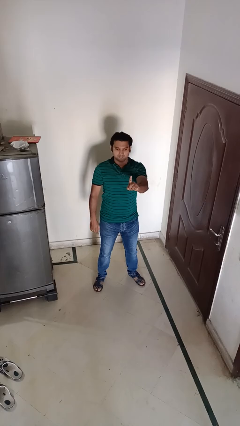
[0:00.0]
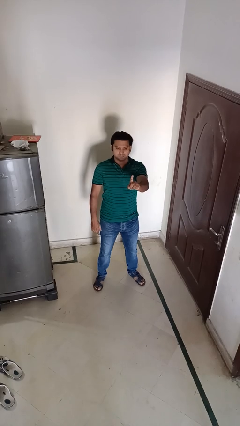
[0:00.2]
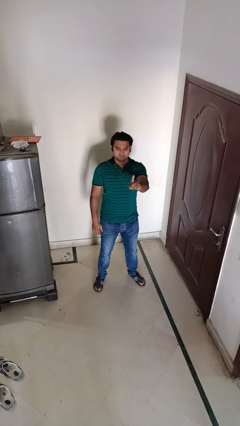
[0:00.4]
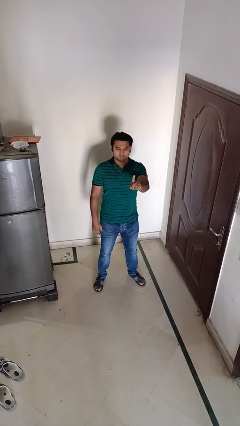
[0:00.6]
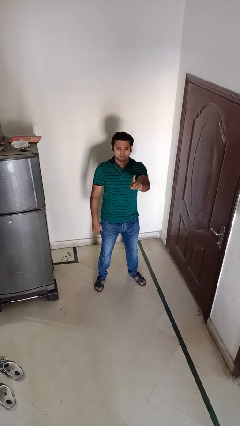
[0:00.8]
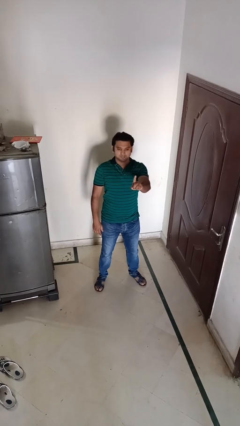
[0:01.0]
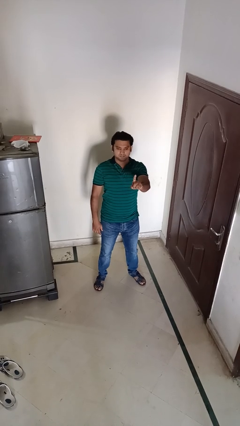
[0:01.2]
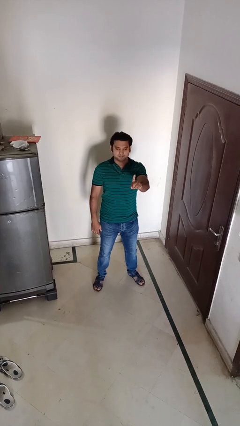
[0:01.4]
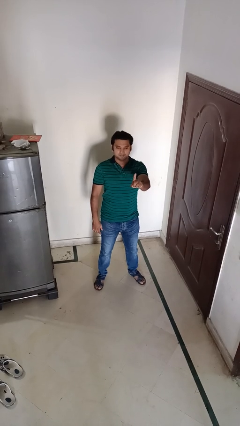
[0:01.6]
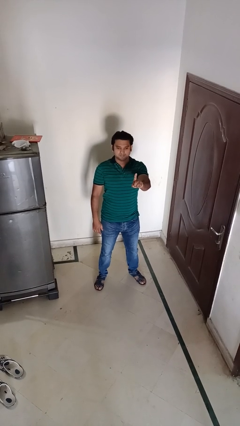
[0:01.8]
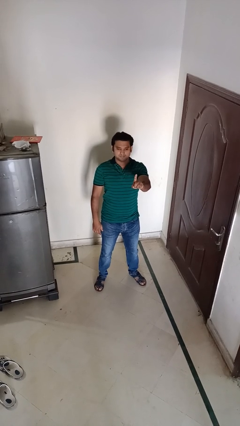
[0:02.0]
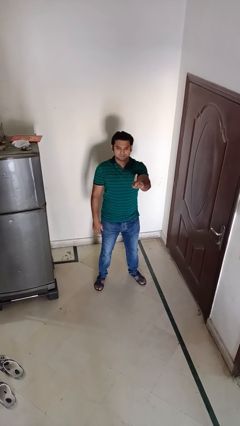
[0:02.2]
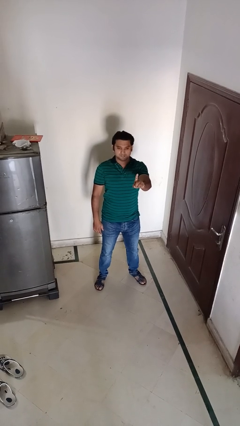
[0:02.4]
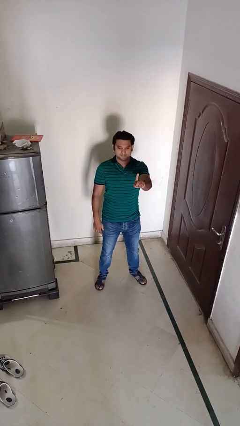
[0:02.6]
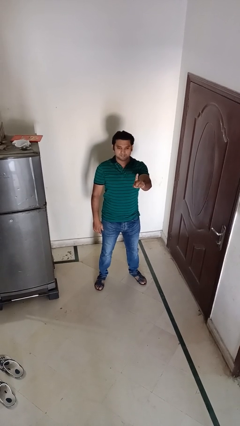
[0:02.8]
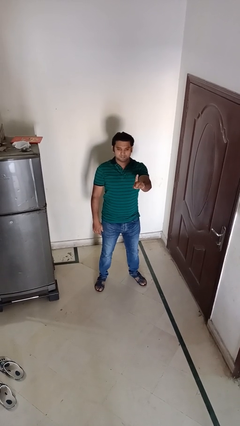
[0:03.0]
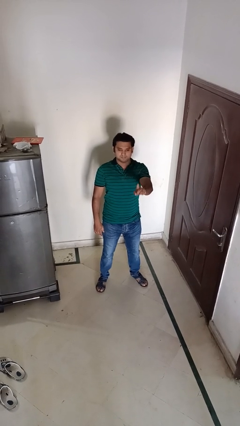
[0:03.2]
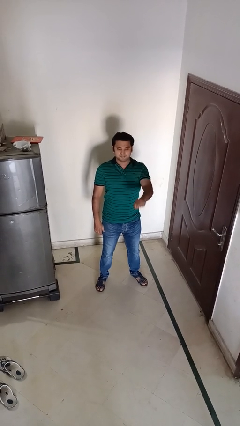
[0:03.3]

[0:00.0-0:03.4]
person gestures number one

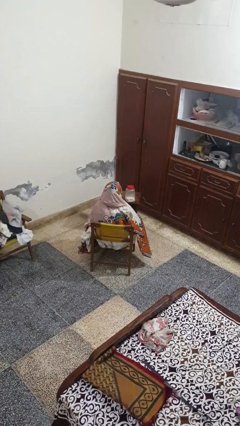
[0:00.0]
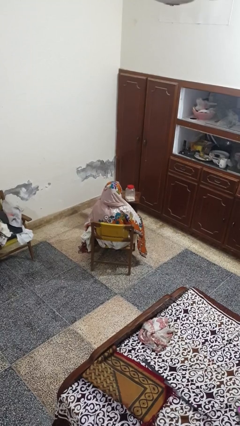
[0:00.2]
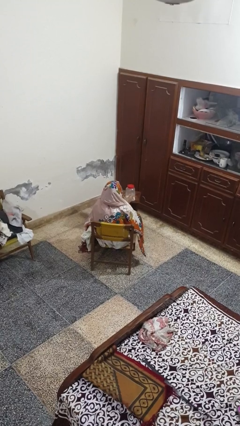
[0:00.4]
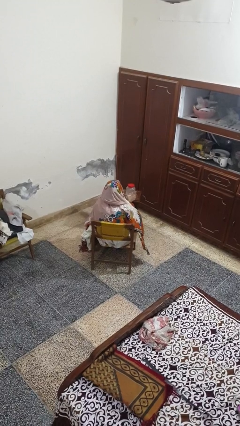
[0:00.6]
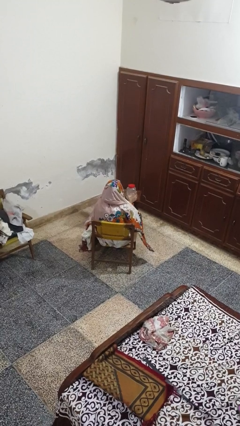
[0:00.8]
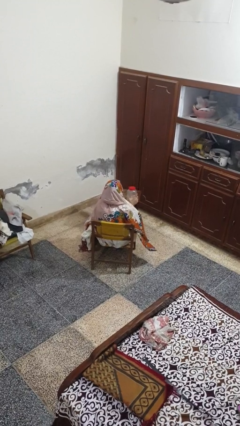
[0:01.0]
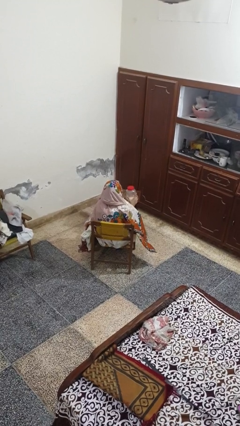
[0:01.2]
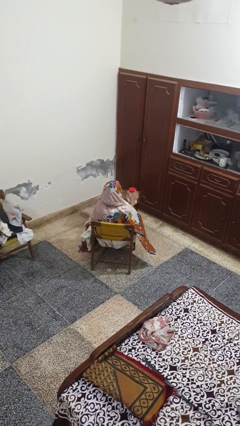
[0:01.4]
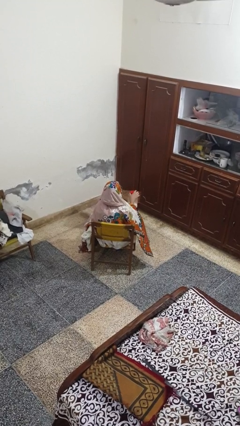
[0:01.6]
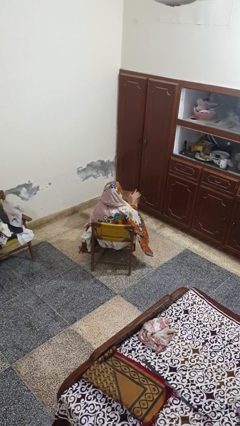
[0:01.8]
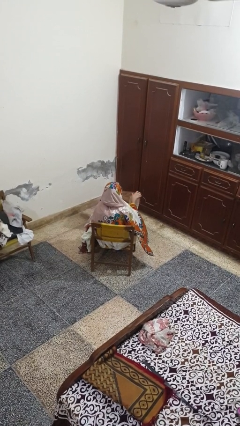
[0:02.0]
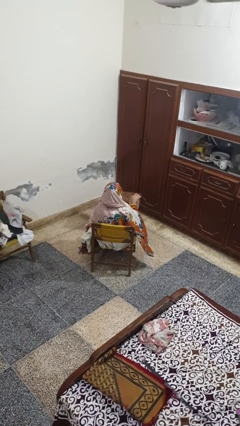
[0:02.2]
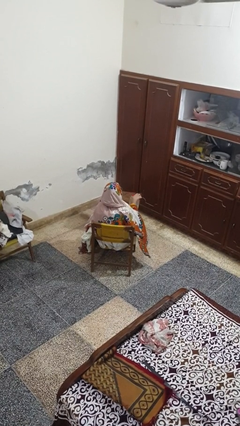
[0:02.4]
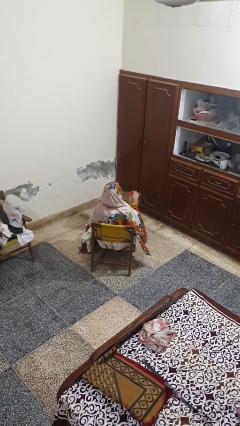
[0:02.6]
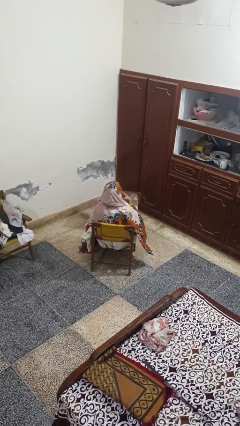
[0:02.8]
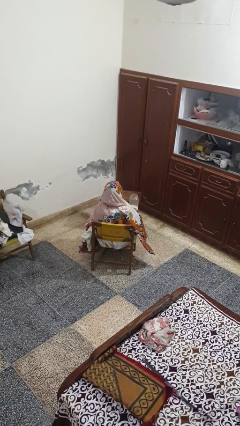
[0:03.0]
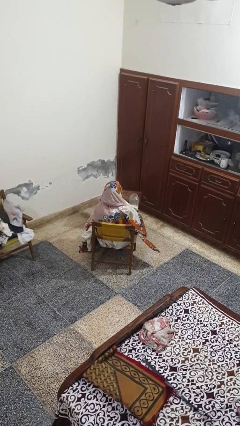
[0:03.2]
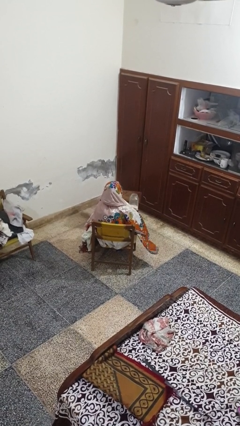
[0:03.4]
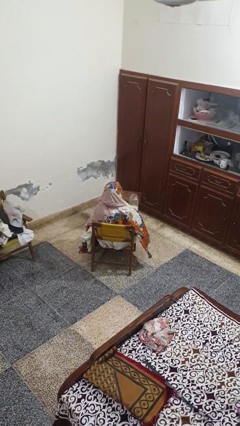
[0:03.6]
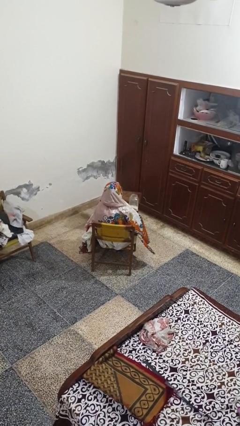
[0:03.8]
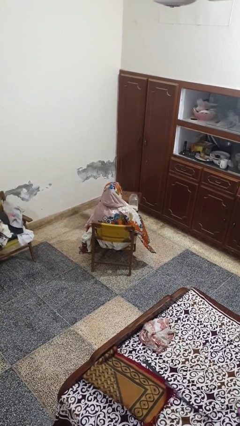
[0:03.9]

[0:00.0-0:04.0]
person opens jar

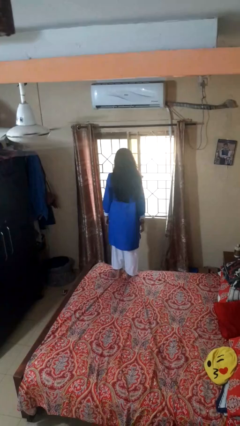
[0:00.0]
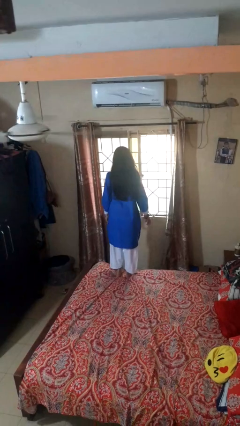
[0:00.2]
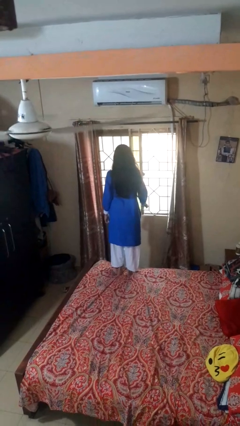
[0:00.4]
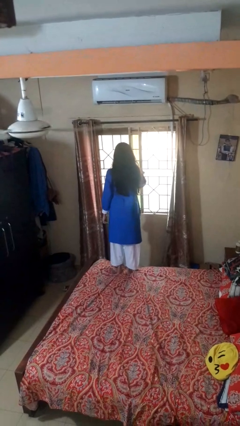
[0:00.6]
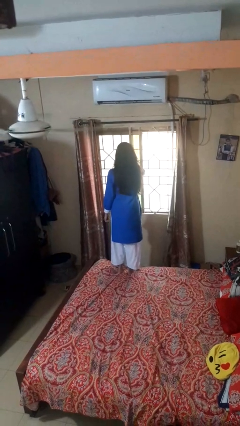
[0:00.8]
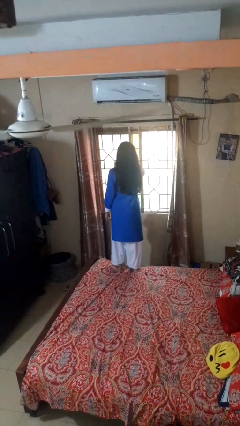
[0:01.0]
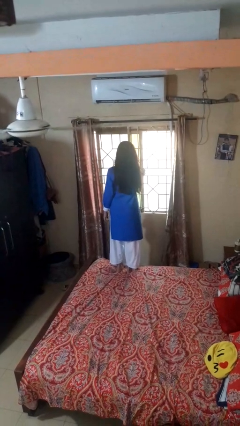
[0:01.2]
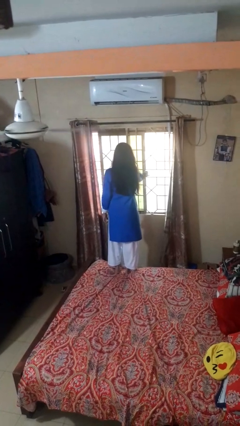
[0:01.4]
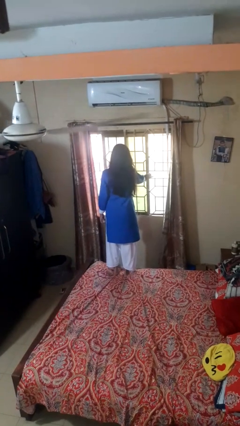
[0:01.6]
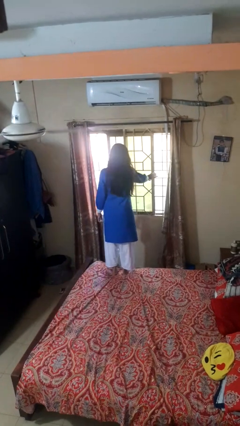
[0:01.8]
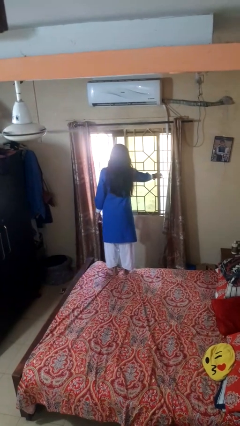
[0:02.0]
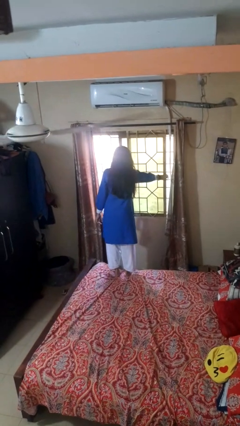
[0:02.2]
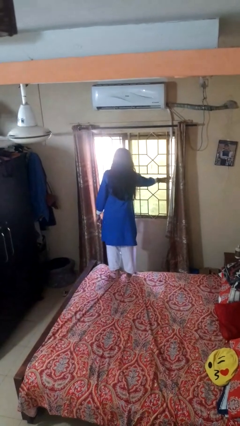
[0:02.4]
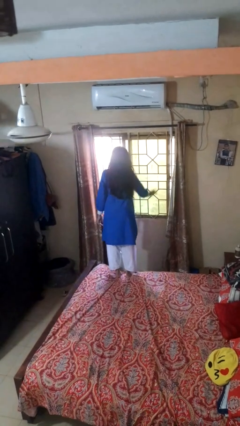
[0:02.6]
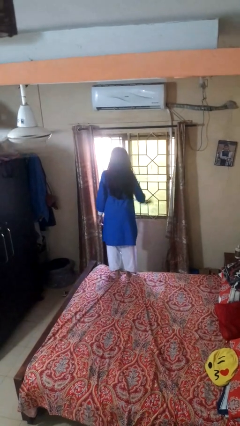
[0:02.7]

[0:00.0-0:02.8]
person opens home window

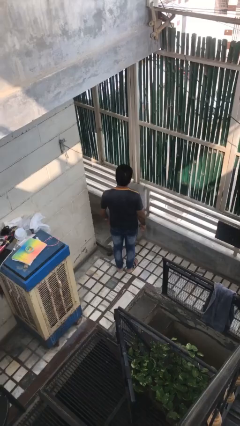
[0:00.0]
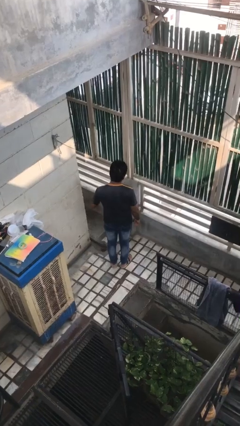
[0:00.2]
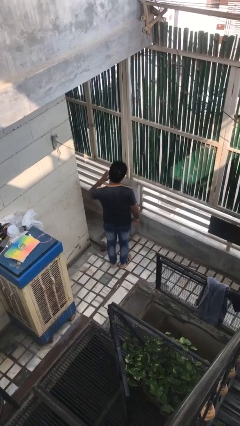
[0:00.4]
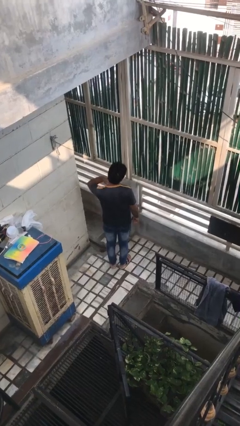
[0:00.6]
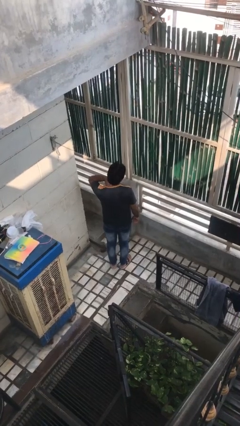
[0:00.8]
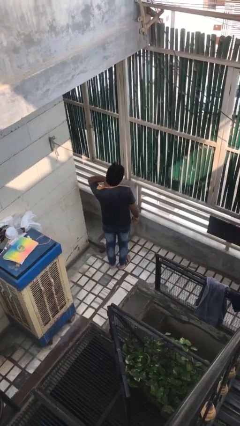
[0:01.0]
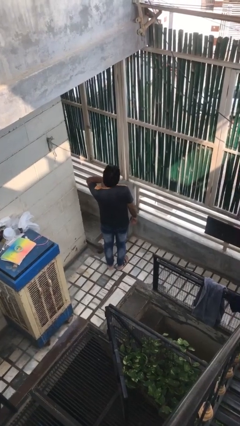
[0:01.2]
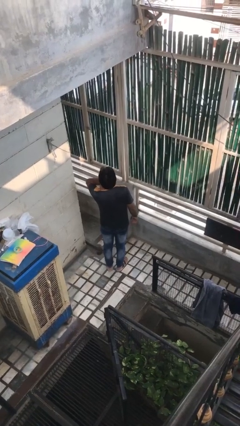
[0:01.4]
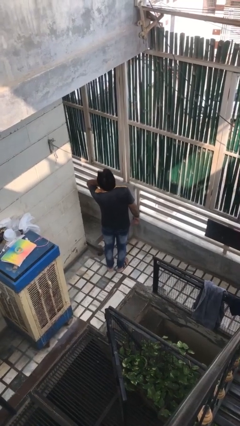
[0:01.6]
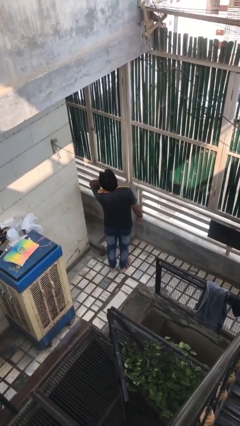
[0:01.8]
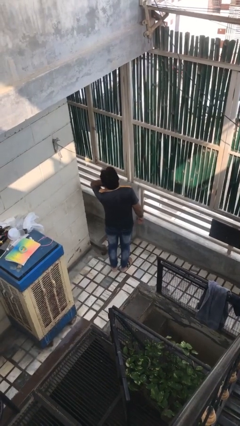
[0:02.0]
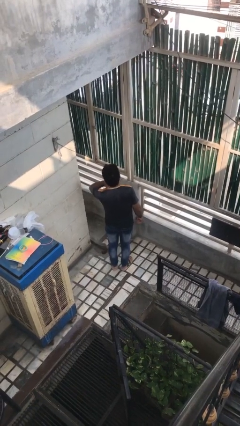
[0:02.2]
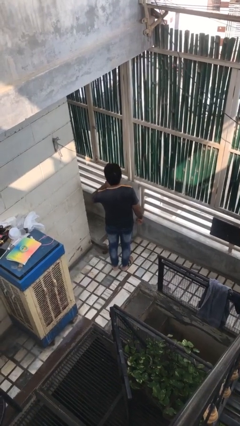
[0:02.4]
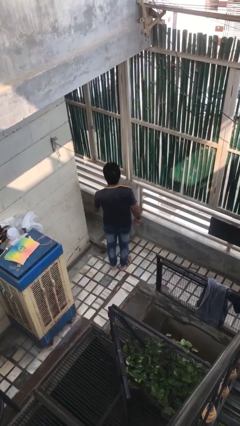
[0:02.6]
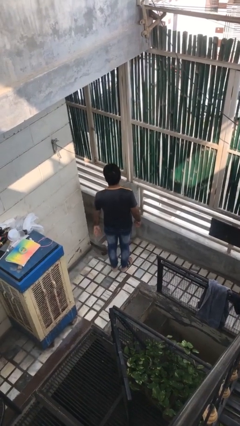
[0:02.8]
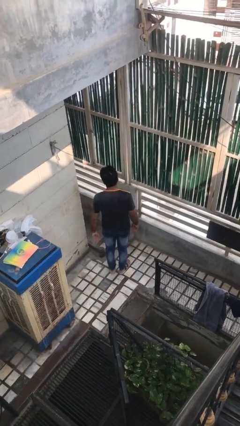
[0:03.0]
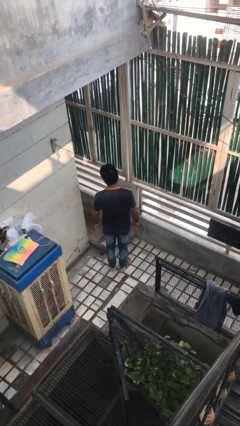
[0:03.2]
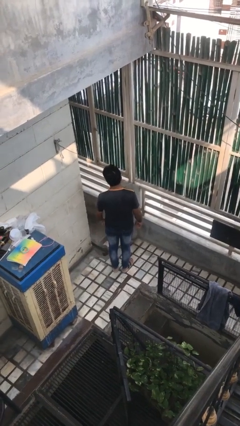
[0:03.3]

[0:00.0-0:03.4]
person rubs neck

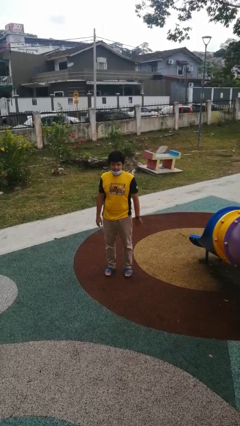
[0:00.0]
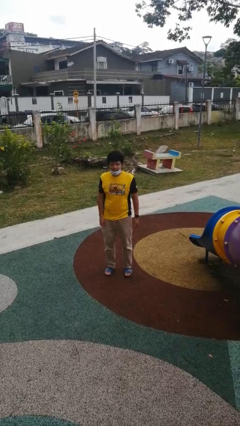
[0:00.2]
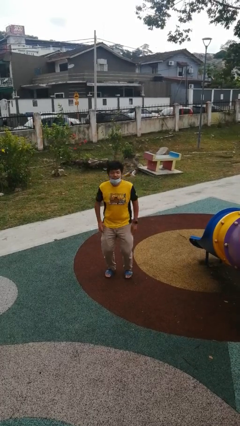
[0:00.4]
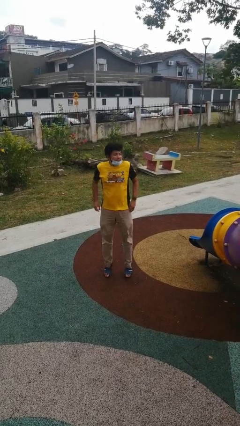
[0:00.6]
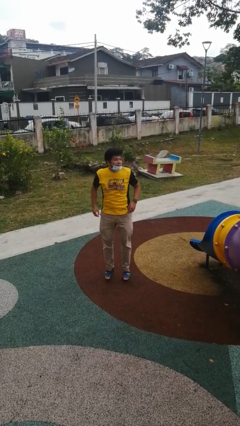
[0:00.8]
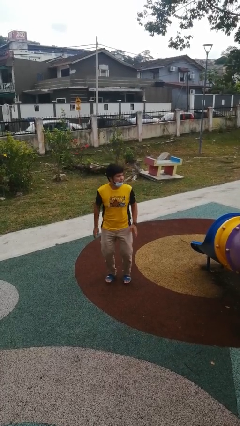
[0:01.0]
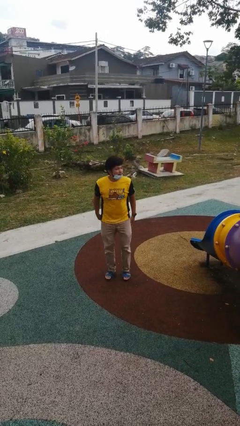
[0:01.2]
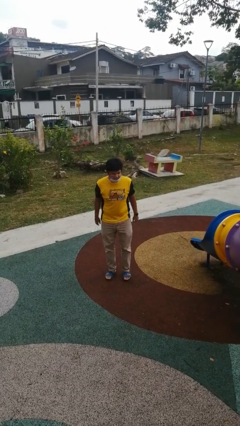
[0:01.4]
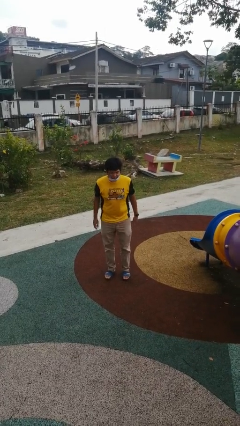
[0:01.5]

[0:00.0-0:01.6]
person jumps

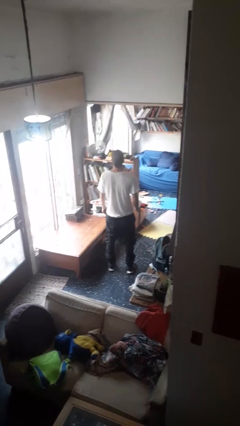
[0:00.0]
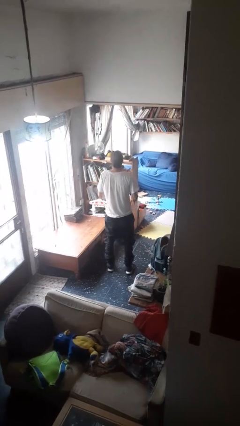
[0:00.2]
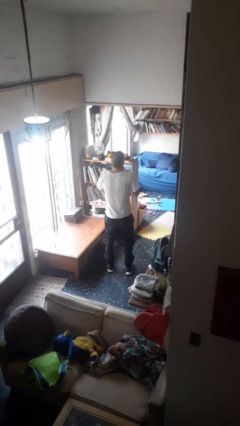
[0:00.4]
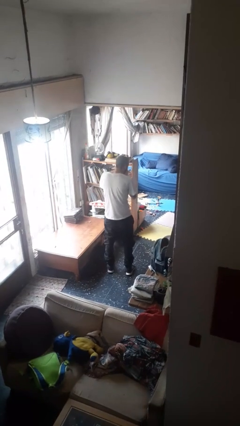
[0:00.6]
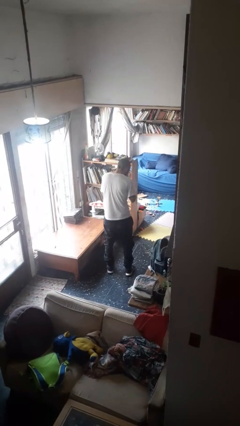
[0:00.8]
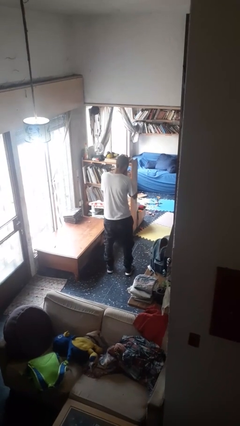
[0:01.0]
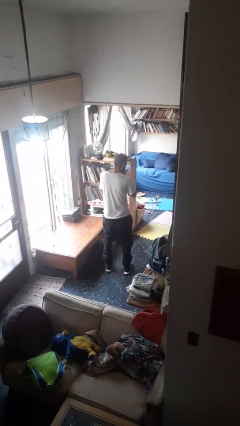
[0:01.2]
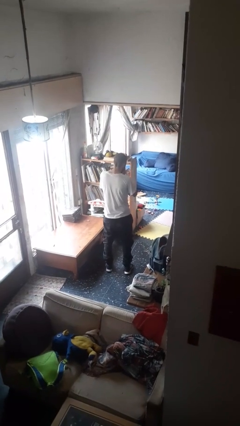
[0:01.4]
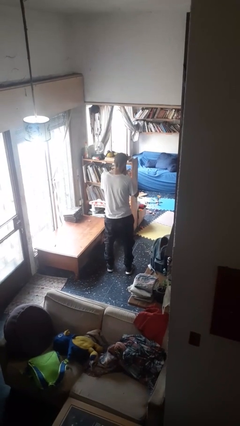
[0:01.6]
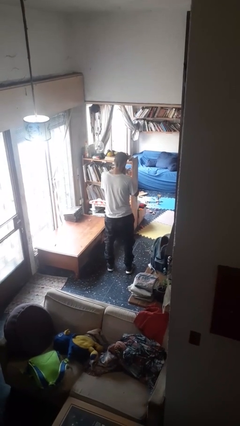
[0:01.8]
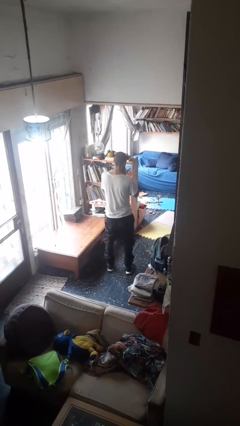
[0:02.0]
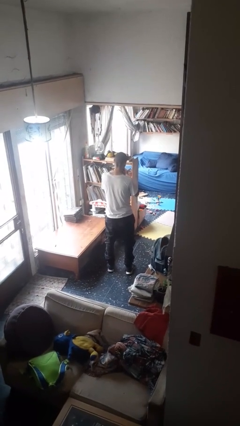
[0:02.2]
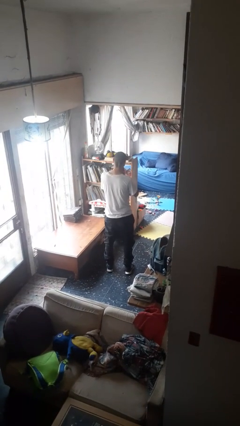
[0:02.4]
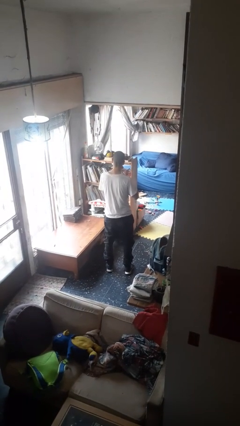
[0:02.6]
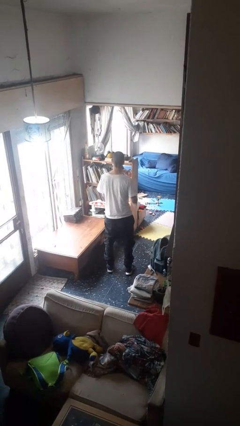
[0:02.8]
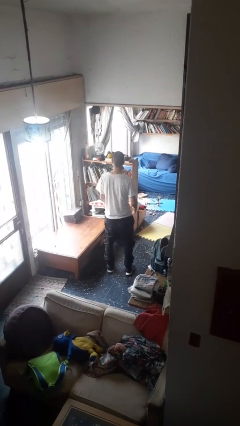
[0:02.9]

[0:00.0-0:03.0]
person sneezes into hand
